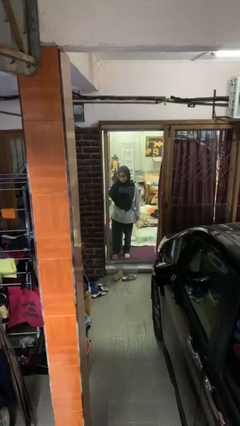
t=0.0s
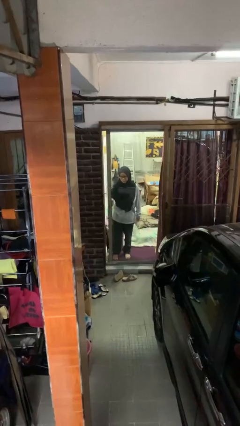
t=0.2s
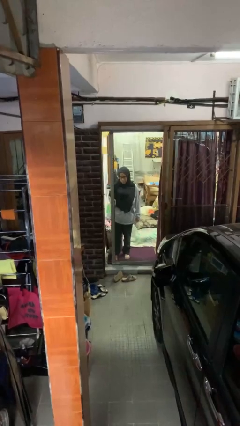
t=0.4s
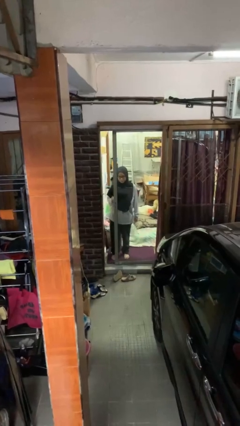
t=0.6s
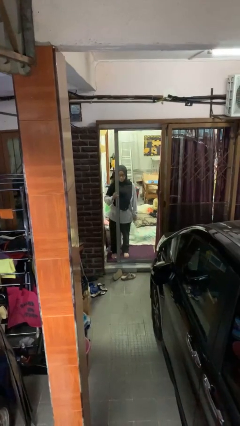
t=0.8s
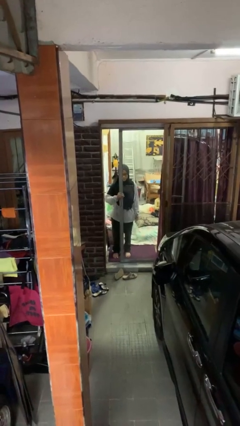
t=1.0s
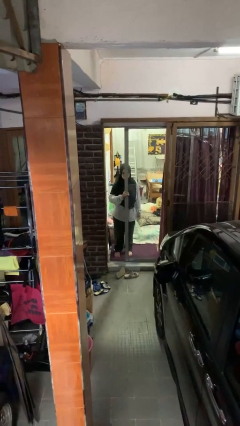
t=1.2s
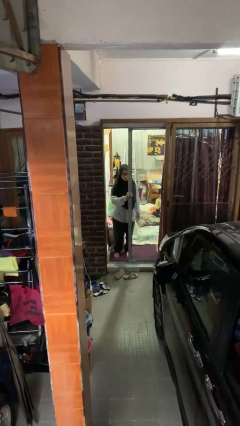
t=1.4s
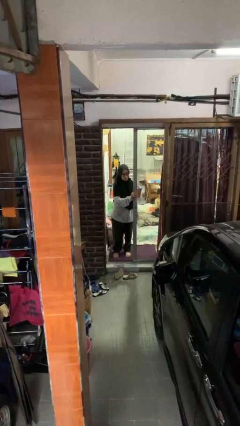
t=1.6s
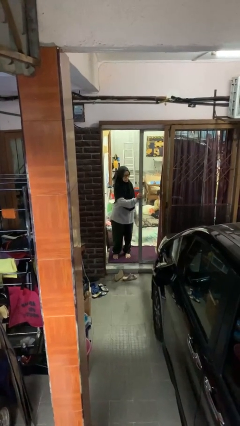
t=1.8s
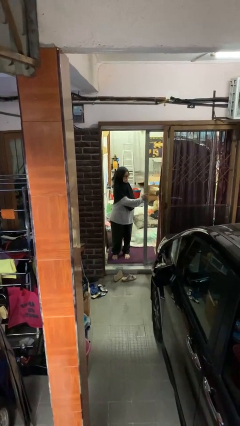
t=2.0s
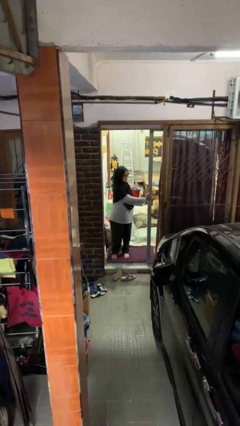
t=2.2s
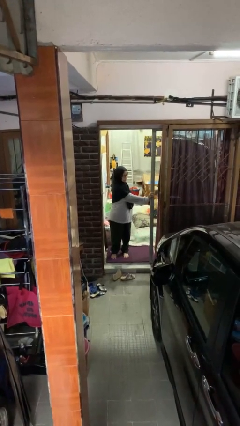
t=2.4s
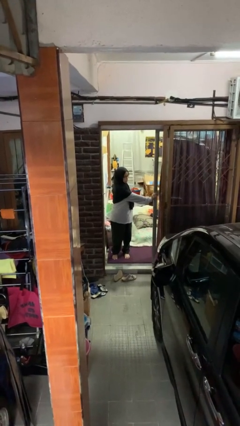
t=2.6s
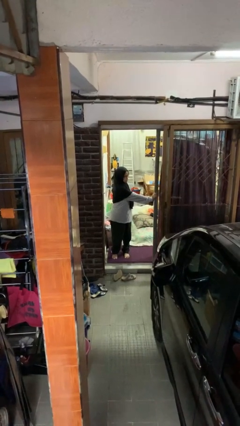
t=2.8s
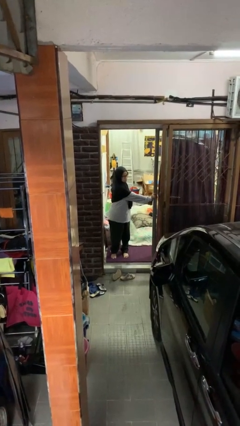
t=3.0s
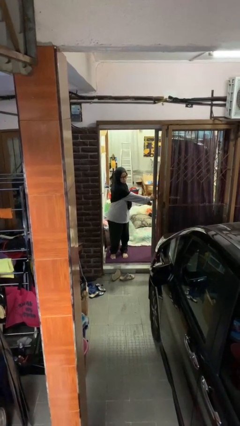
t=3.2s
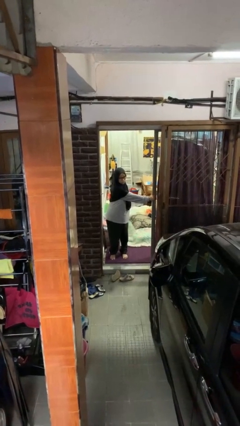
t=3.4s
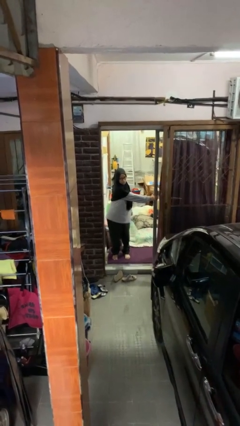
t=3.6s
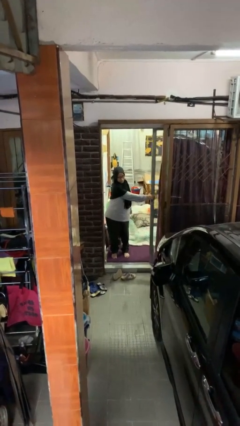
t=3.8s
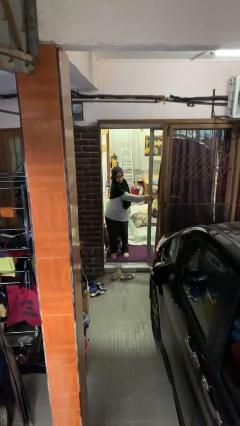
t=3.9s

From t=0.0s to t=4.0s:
person opens sliding door

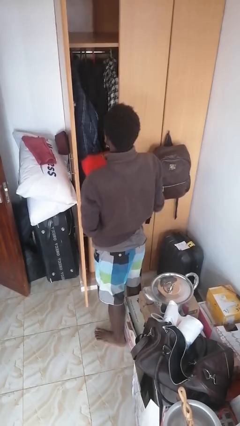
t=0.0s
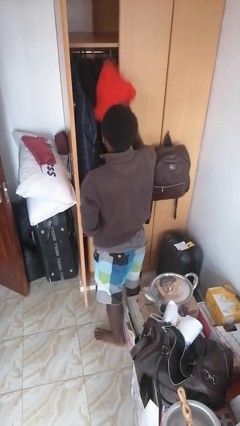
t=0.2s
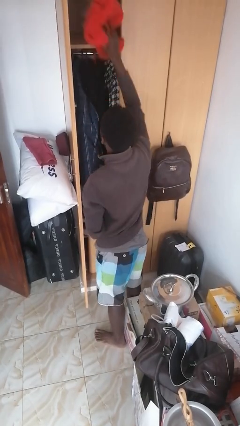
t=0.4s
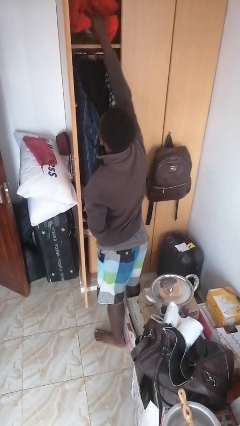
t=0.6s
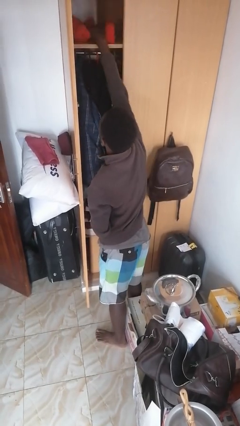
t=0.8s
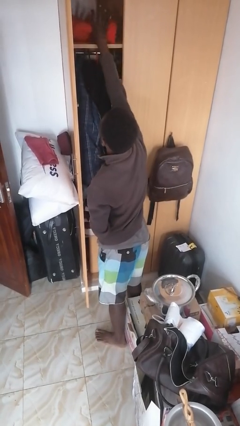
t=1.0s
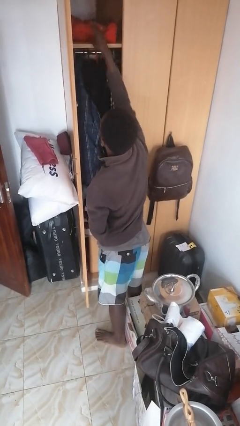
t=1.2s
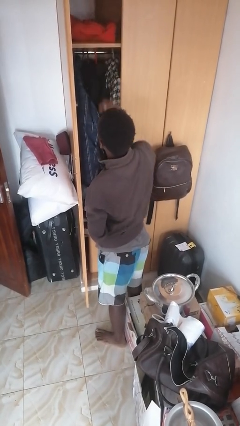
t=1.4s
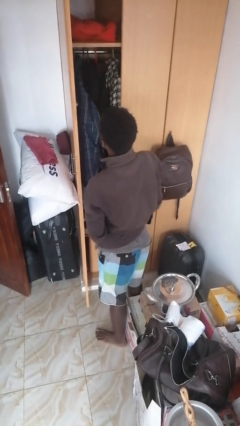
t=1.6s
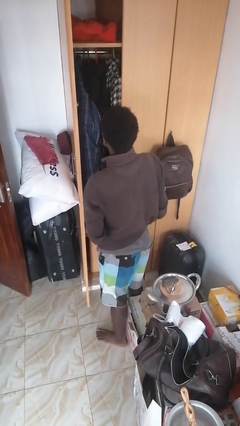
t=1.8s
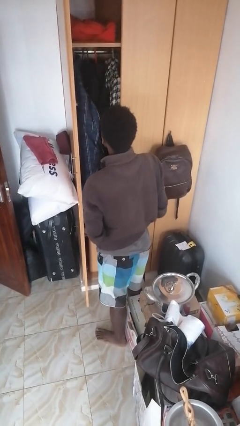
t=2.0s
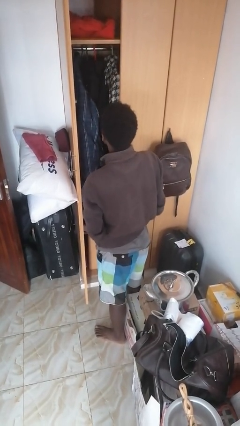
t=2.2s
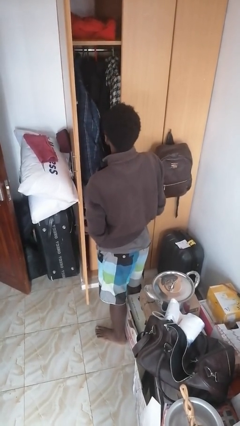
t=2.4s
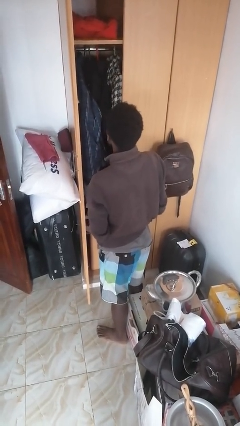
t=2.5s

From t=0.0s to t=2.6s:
person puts down object on shelf

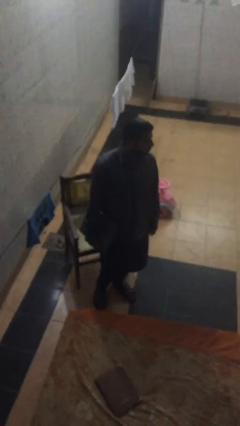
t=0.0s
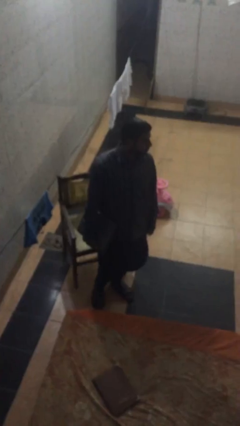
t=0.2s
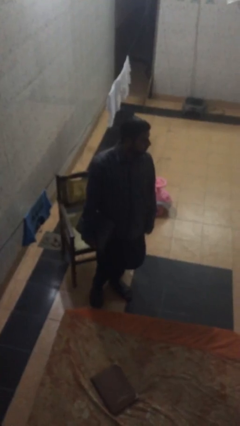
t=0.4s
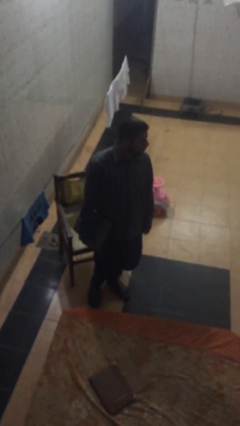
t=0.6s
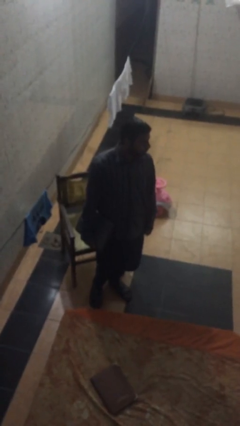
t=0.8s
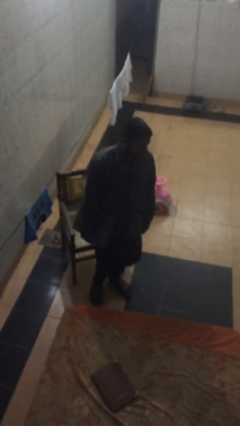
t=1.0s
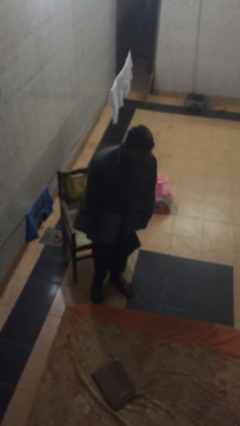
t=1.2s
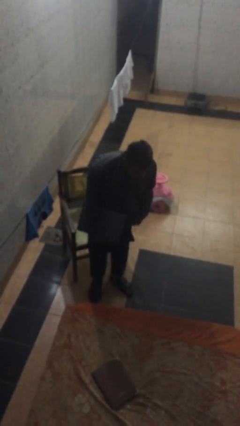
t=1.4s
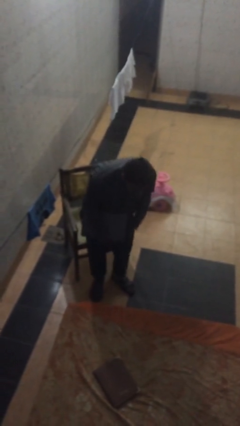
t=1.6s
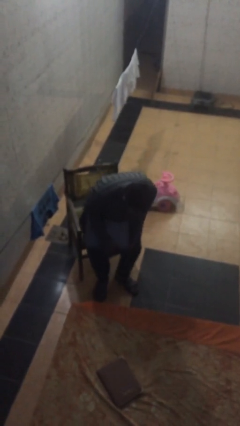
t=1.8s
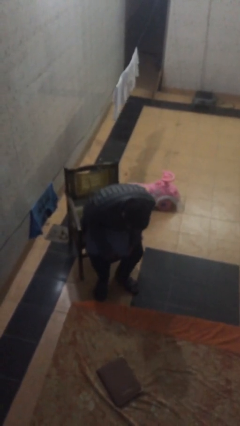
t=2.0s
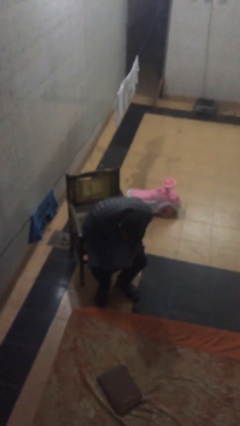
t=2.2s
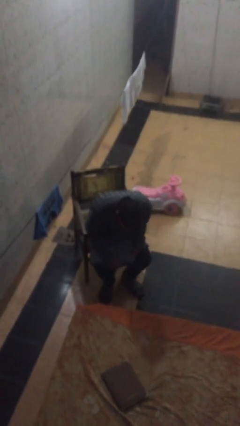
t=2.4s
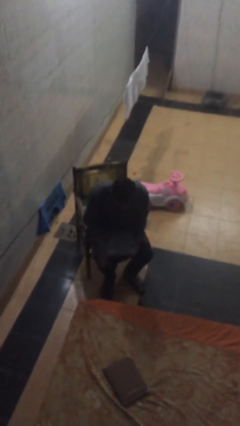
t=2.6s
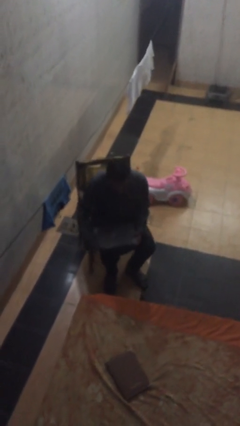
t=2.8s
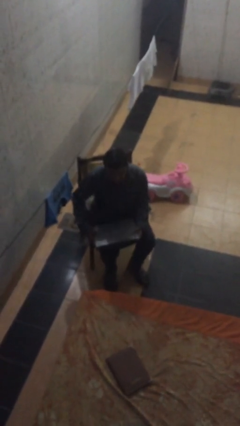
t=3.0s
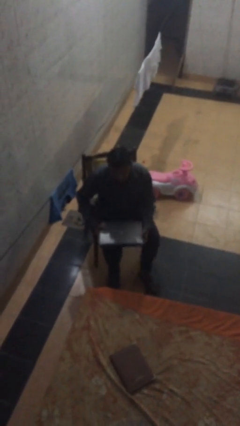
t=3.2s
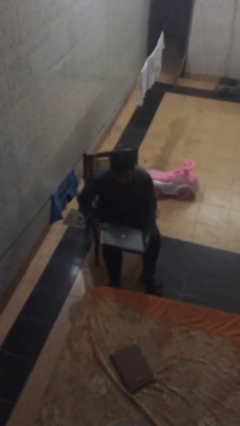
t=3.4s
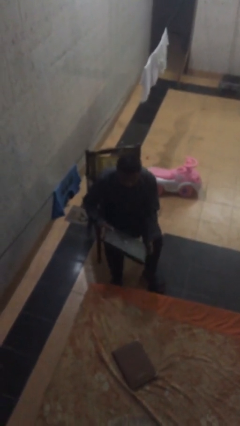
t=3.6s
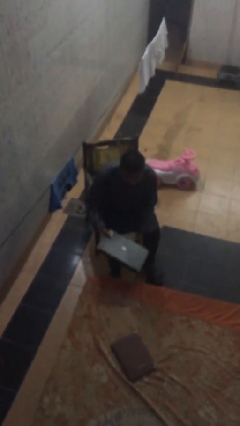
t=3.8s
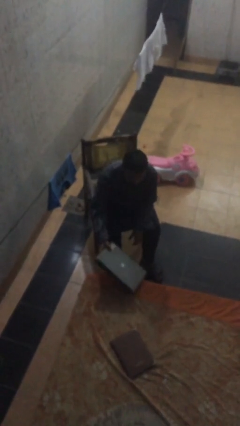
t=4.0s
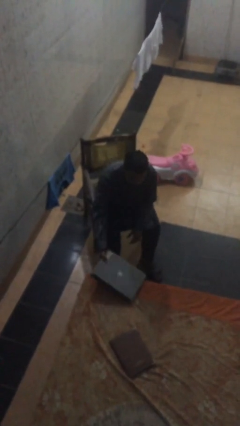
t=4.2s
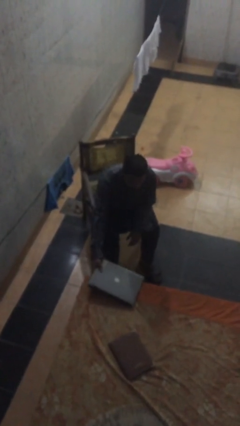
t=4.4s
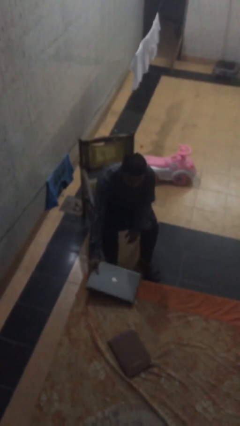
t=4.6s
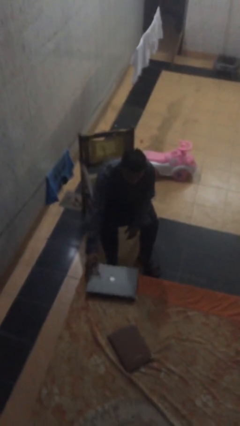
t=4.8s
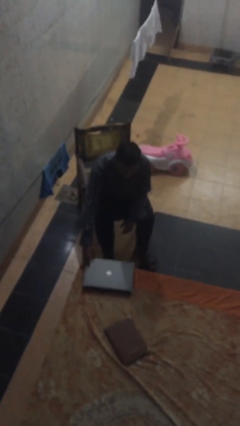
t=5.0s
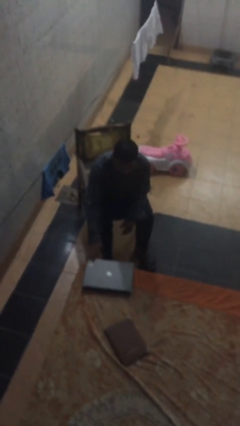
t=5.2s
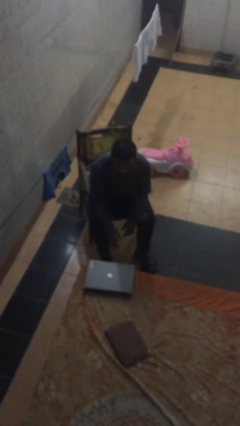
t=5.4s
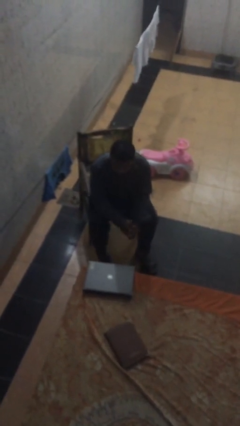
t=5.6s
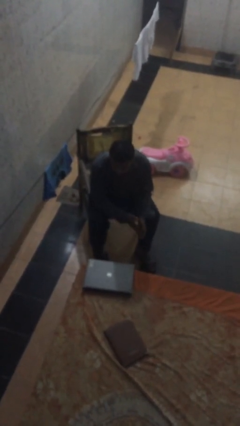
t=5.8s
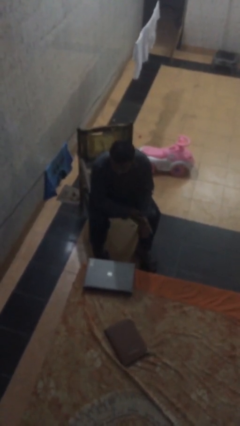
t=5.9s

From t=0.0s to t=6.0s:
person sits down

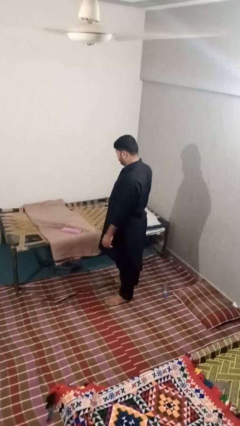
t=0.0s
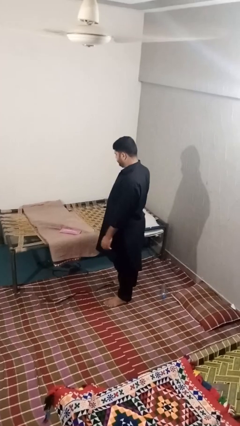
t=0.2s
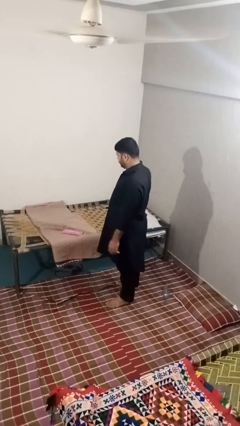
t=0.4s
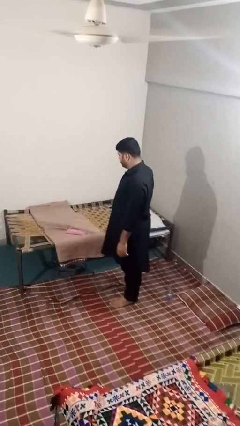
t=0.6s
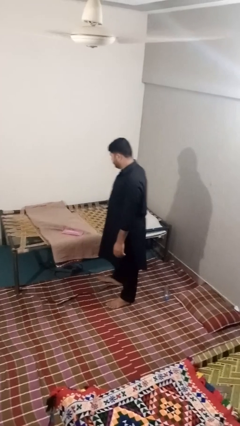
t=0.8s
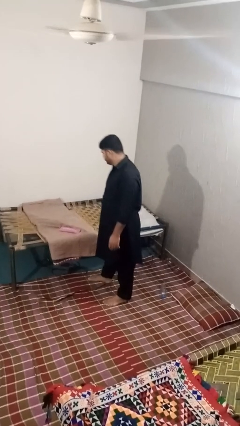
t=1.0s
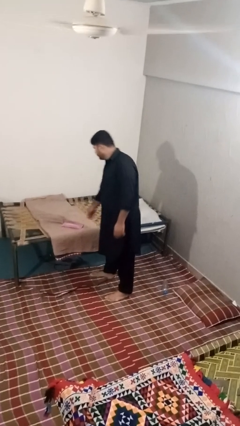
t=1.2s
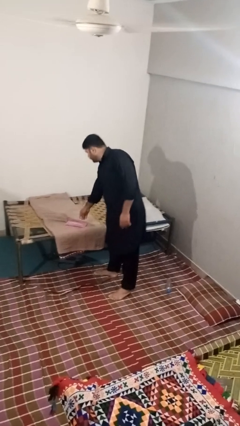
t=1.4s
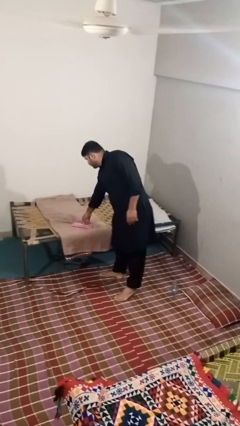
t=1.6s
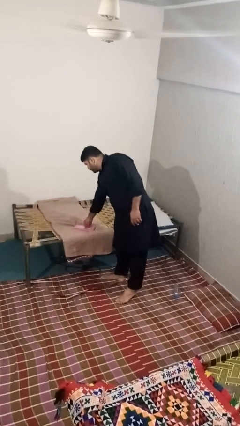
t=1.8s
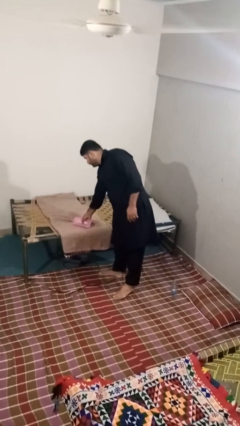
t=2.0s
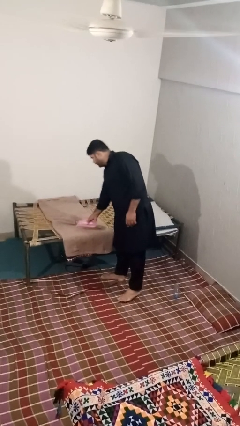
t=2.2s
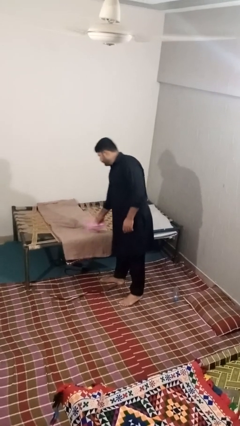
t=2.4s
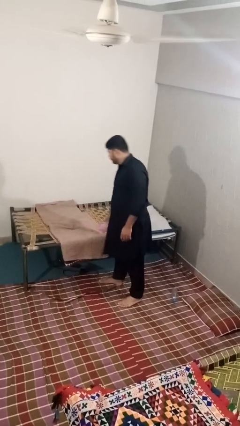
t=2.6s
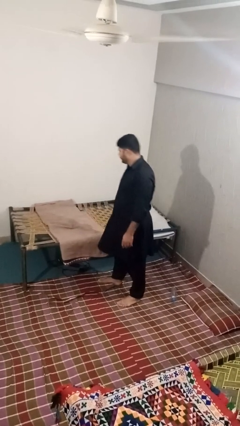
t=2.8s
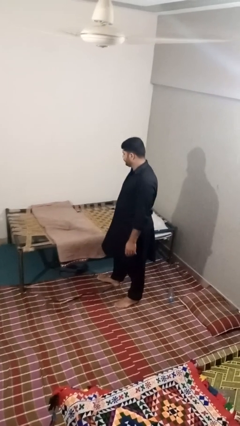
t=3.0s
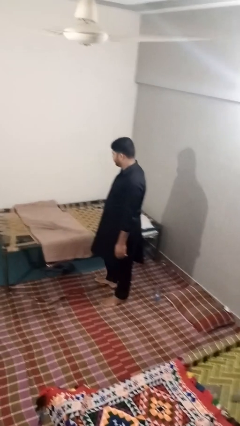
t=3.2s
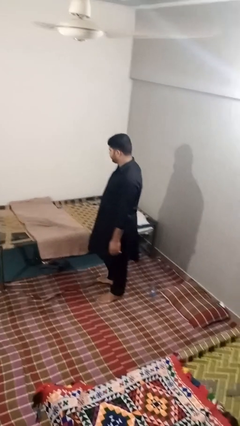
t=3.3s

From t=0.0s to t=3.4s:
person picks up object from bed

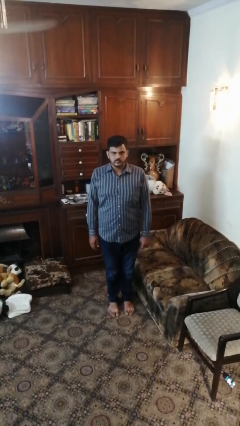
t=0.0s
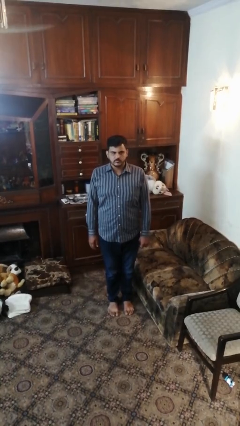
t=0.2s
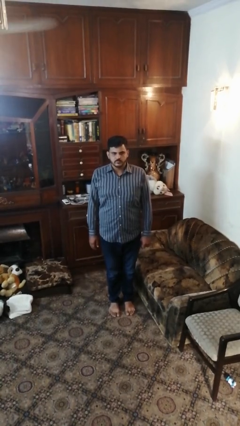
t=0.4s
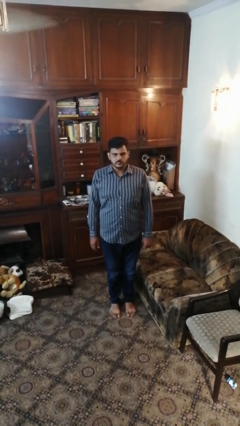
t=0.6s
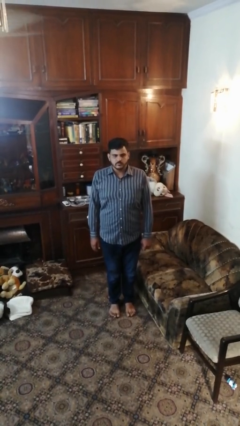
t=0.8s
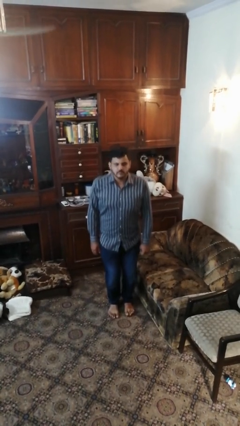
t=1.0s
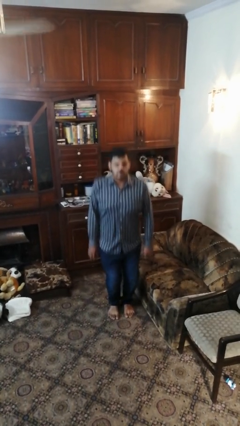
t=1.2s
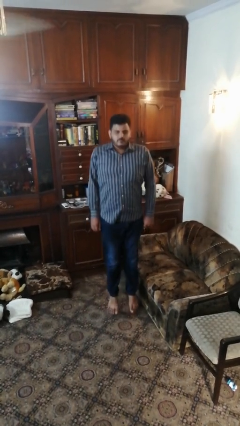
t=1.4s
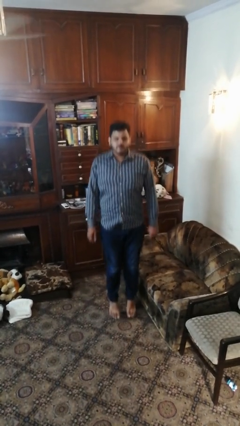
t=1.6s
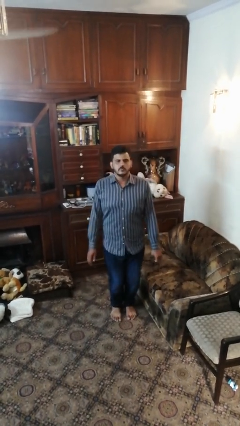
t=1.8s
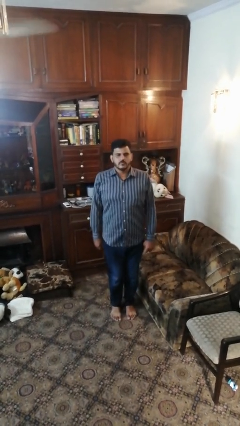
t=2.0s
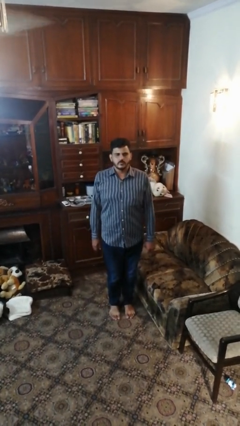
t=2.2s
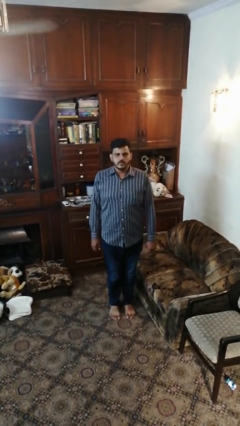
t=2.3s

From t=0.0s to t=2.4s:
person jumps
